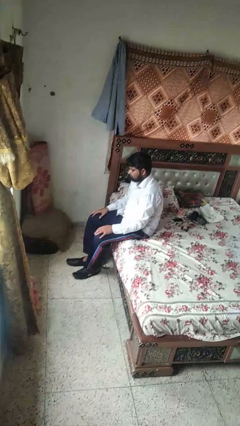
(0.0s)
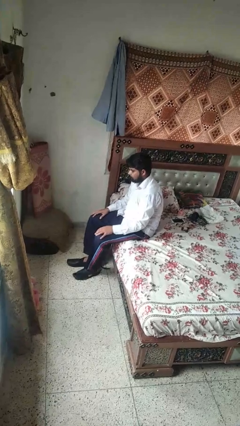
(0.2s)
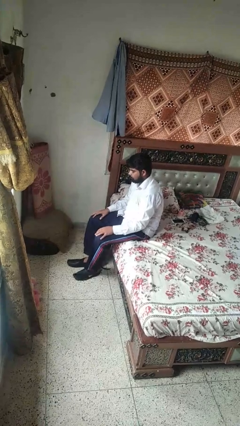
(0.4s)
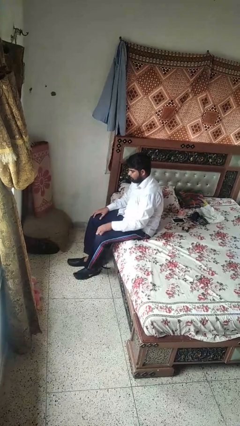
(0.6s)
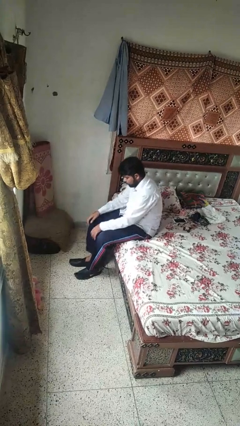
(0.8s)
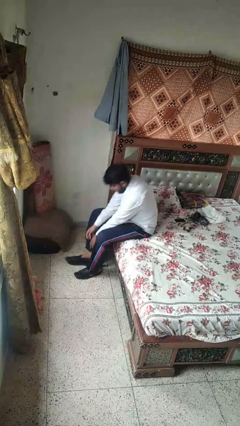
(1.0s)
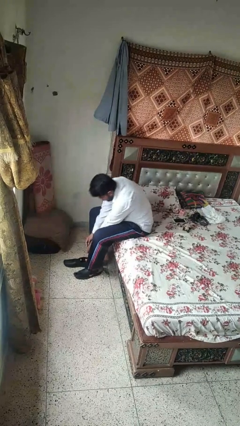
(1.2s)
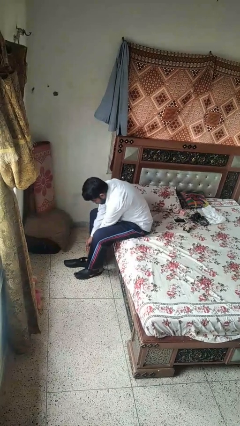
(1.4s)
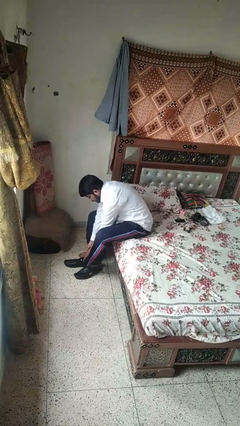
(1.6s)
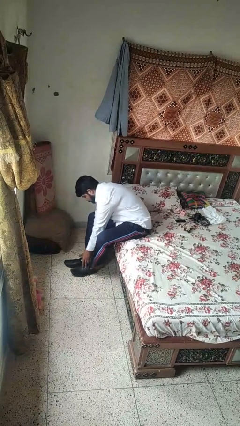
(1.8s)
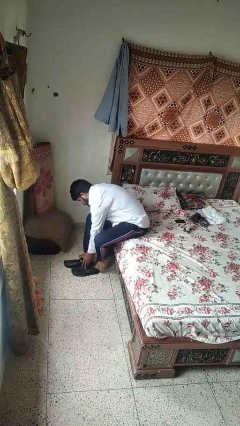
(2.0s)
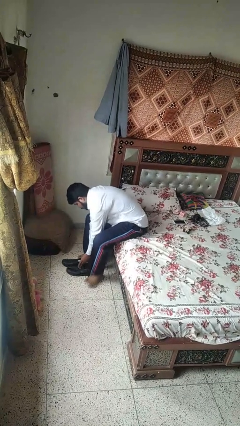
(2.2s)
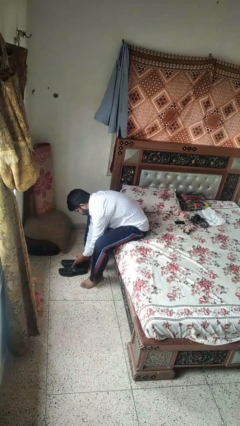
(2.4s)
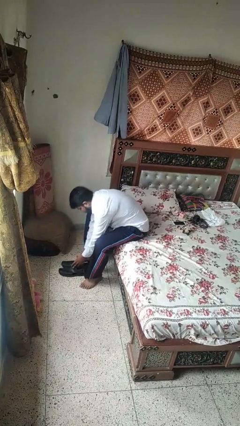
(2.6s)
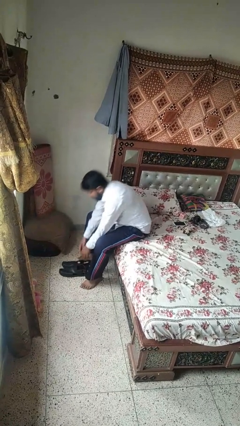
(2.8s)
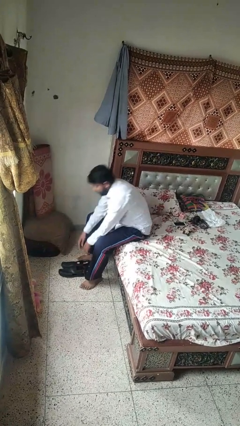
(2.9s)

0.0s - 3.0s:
person takes off shoes

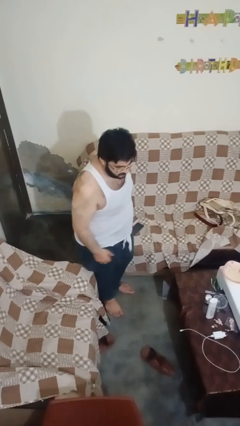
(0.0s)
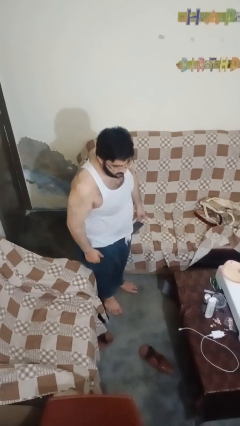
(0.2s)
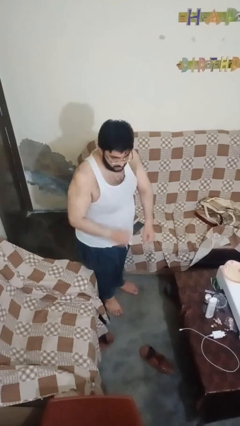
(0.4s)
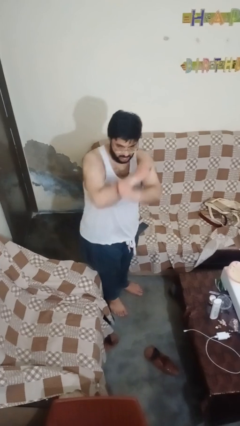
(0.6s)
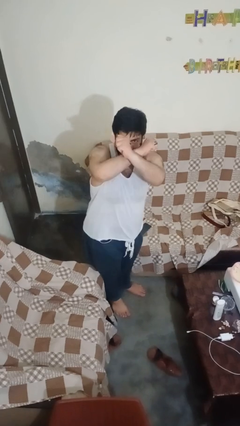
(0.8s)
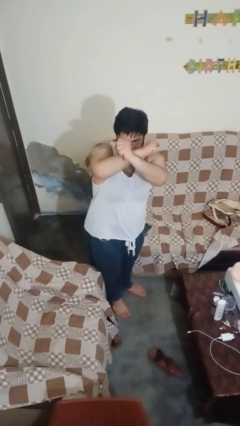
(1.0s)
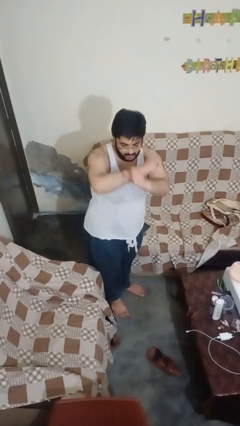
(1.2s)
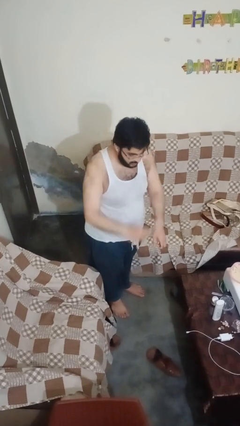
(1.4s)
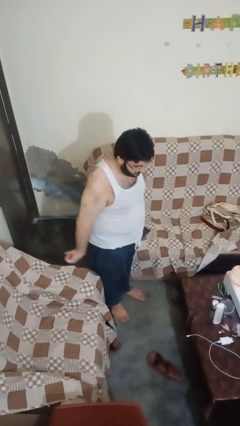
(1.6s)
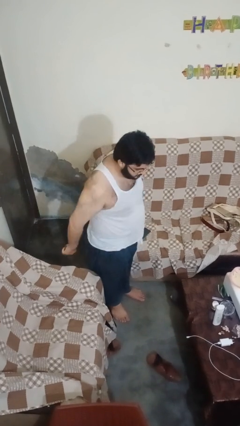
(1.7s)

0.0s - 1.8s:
person karate chop

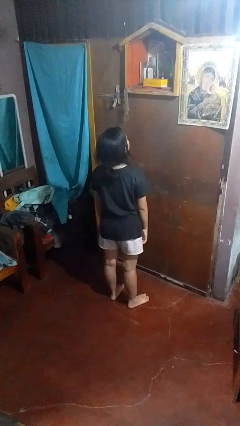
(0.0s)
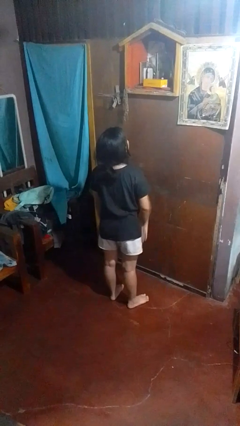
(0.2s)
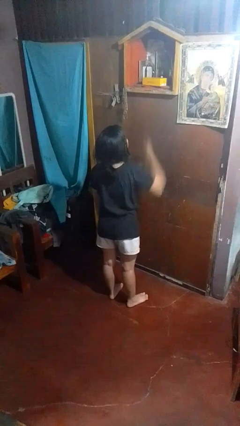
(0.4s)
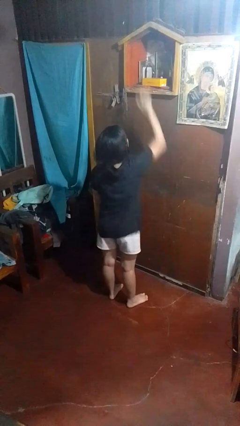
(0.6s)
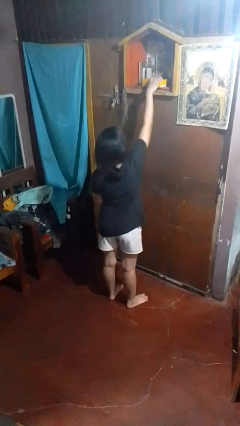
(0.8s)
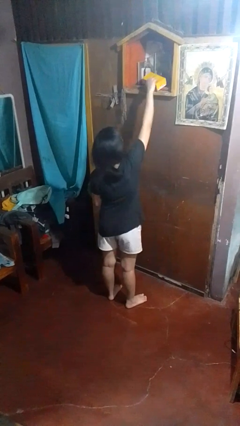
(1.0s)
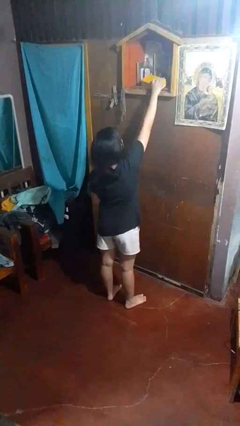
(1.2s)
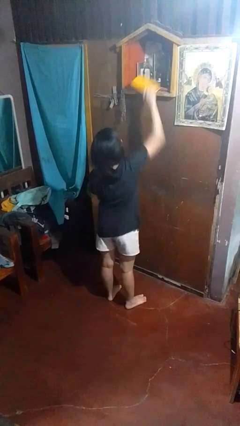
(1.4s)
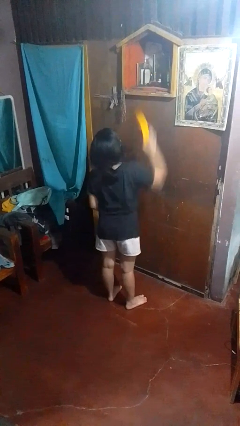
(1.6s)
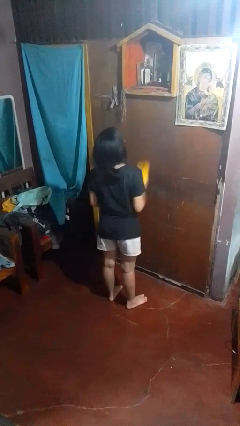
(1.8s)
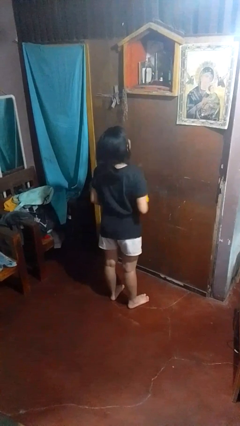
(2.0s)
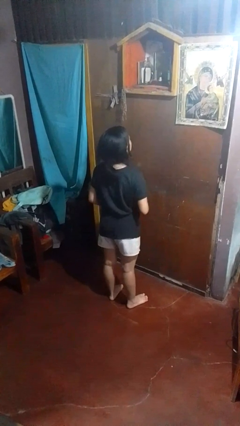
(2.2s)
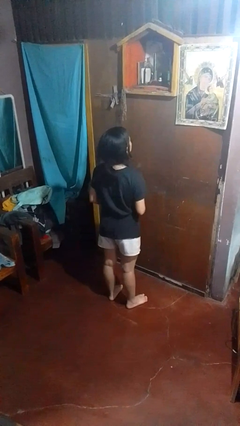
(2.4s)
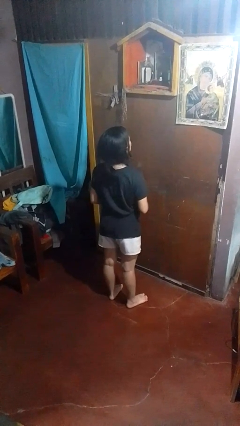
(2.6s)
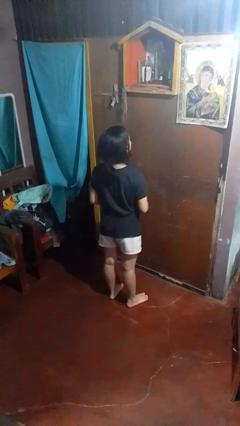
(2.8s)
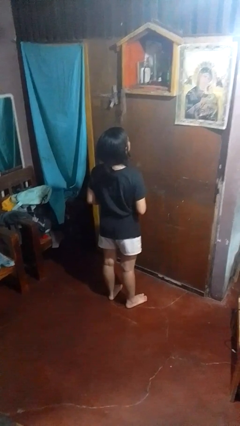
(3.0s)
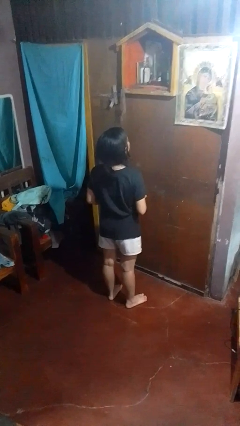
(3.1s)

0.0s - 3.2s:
person picks up object from shelf

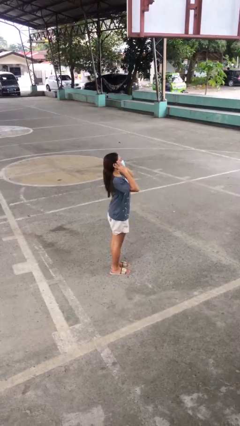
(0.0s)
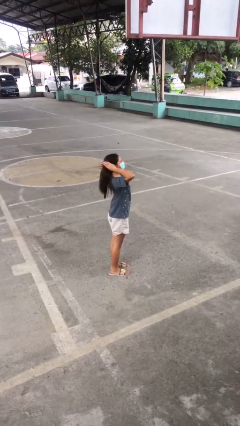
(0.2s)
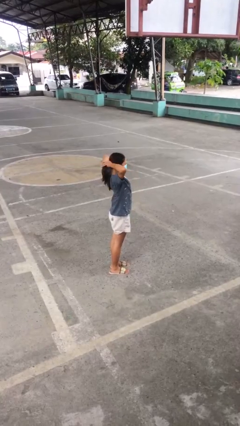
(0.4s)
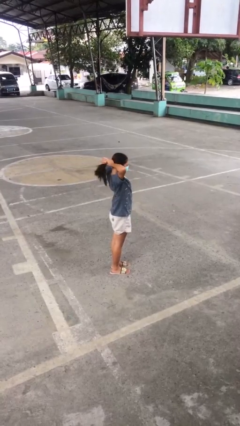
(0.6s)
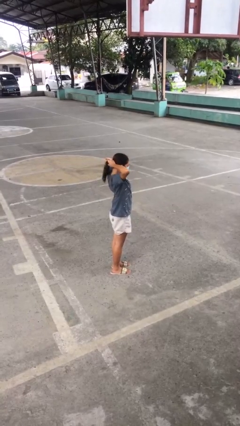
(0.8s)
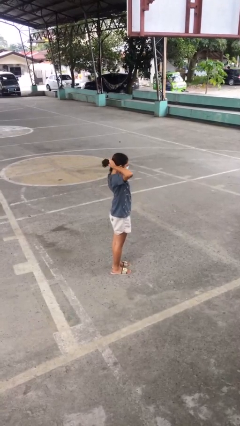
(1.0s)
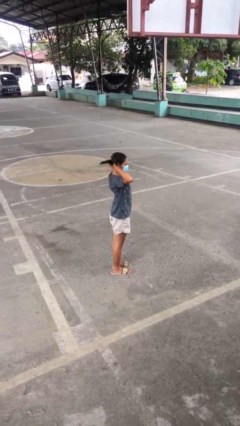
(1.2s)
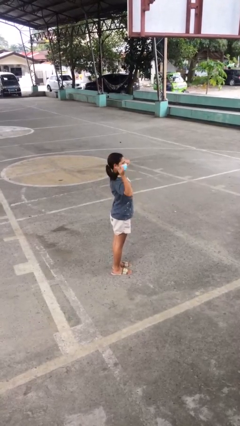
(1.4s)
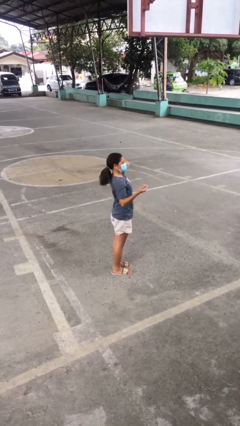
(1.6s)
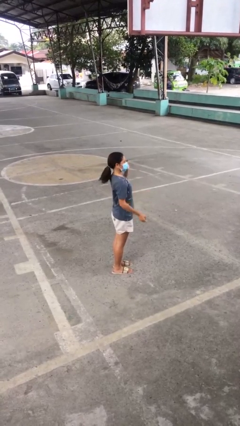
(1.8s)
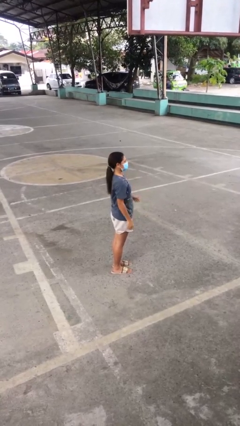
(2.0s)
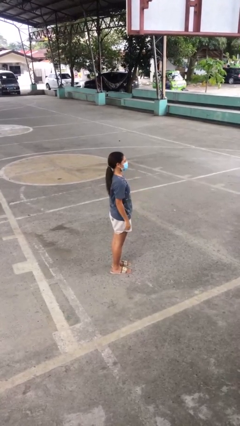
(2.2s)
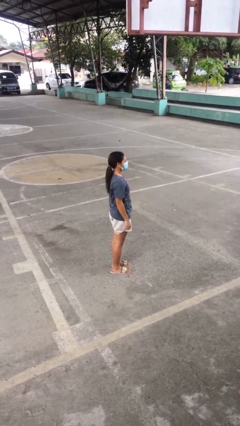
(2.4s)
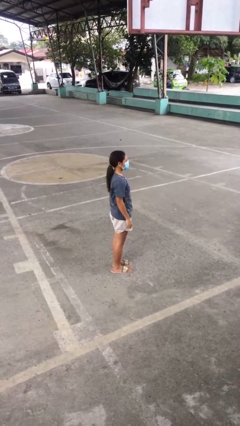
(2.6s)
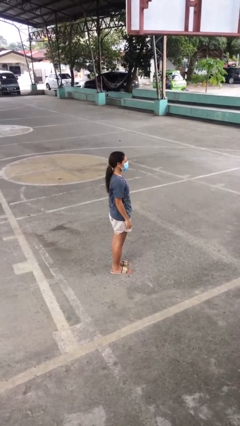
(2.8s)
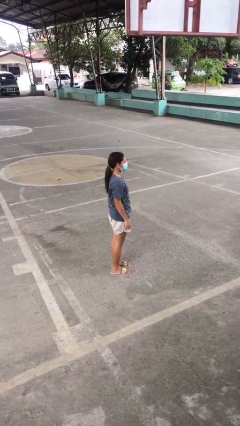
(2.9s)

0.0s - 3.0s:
person puts hair in ponytail

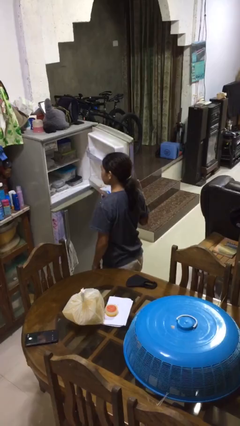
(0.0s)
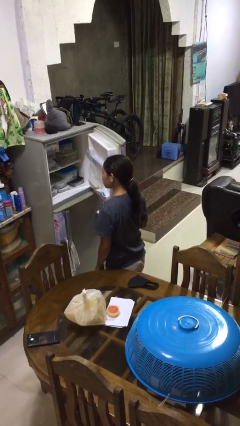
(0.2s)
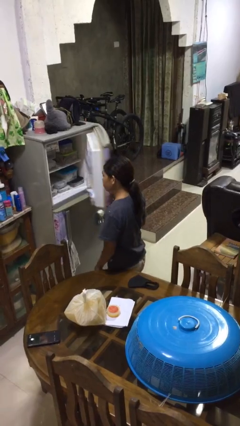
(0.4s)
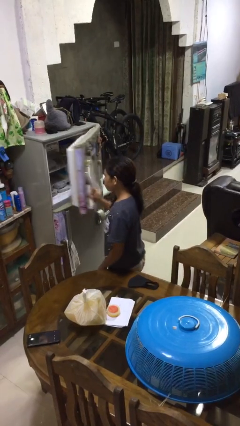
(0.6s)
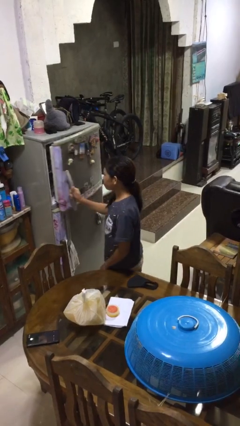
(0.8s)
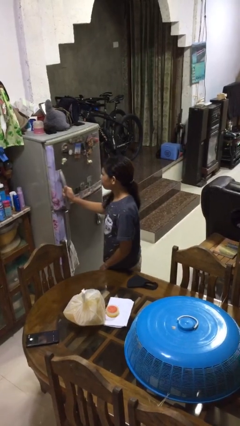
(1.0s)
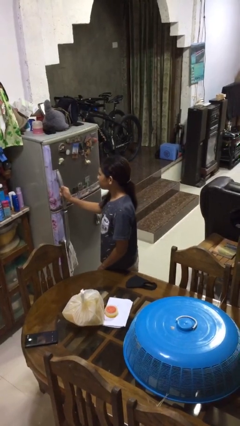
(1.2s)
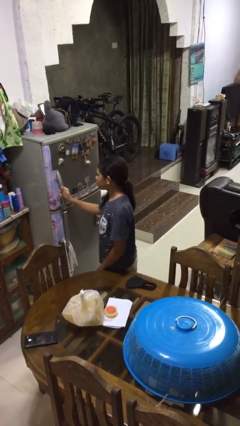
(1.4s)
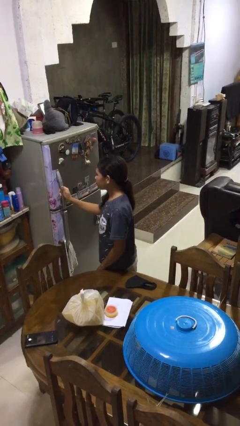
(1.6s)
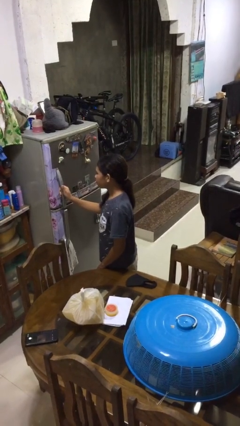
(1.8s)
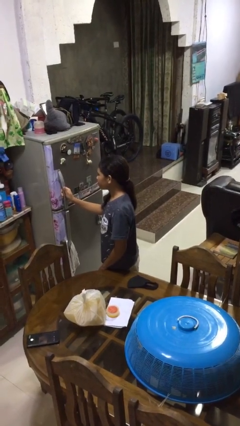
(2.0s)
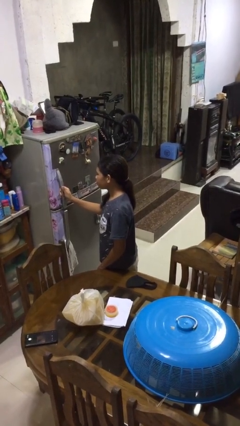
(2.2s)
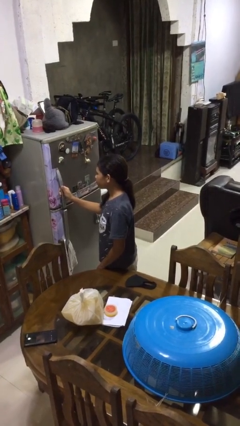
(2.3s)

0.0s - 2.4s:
person closes refrigerator

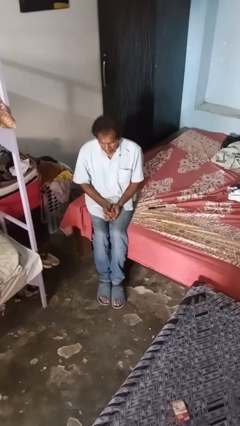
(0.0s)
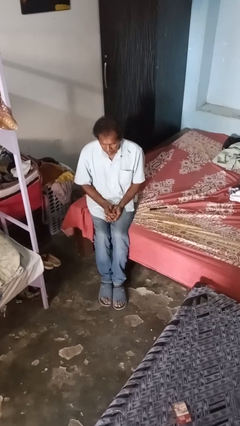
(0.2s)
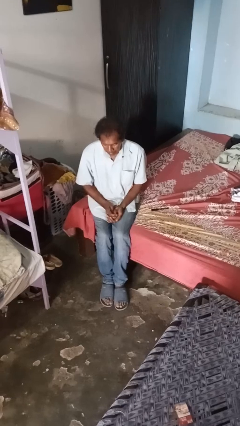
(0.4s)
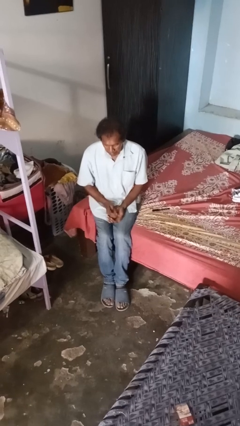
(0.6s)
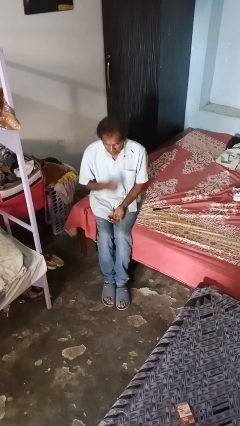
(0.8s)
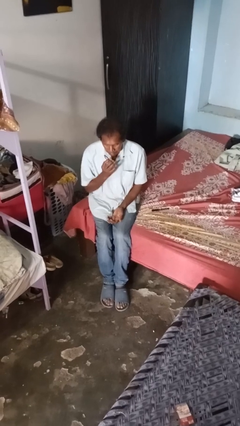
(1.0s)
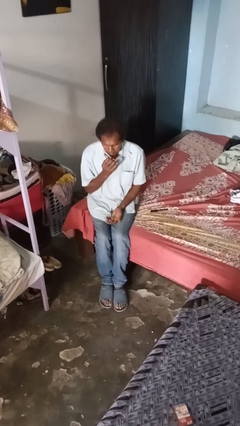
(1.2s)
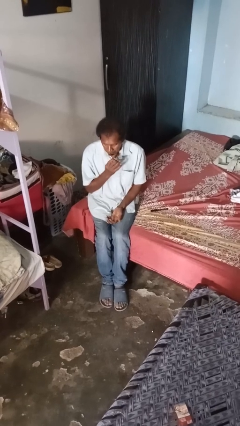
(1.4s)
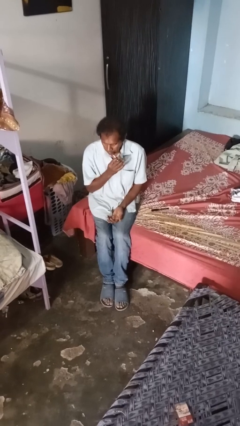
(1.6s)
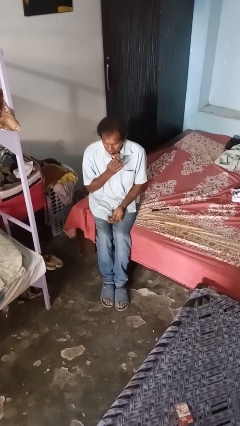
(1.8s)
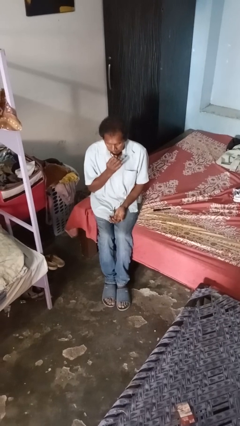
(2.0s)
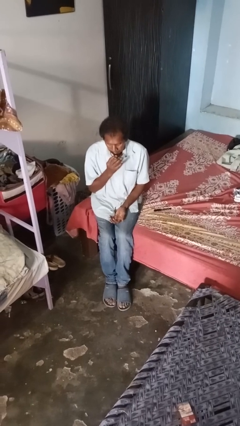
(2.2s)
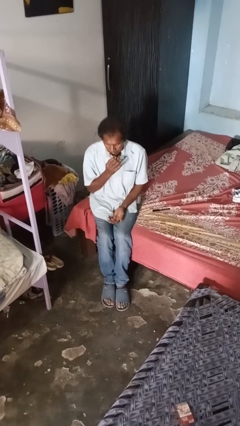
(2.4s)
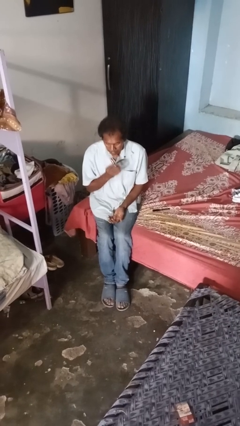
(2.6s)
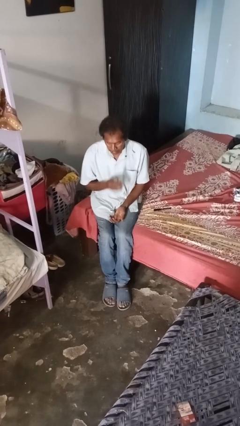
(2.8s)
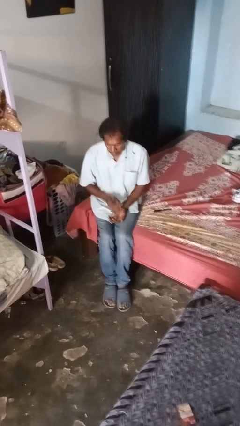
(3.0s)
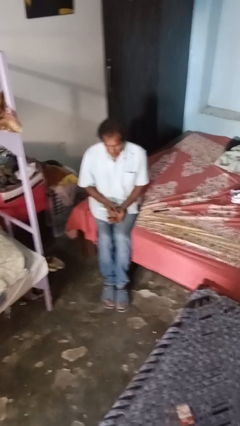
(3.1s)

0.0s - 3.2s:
person applies lip makeup

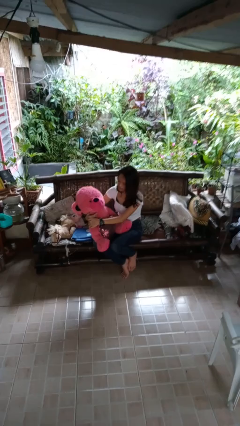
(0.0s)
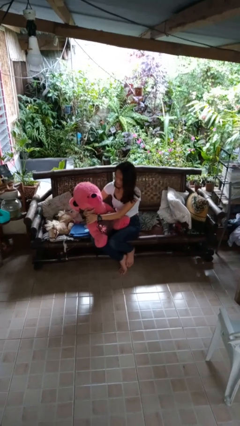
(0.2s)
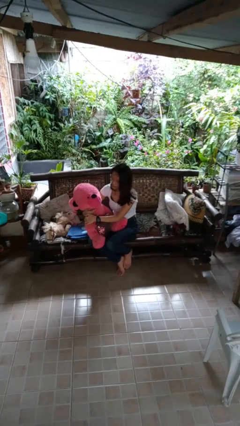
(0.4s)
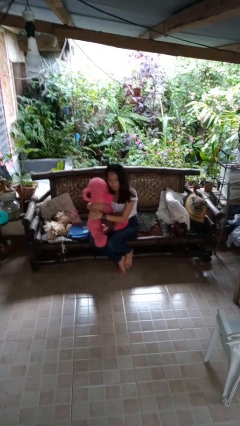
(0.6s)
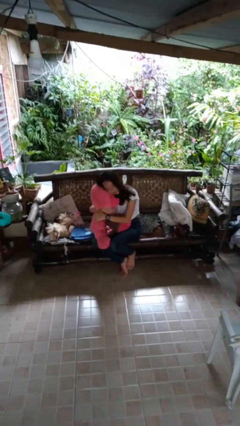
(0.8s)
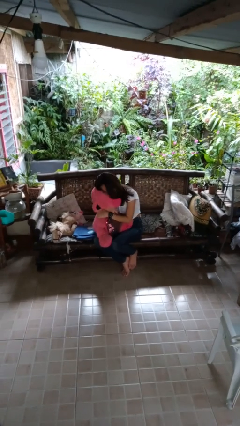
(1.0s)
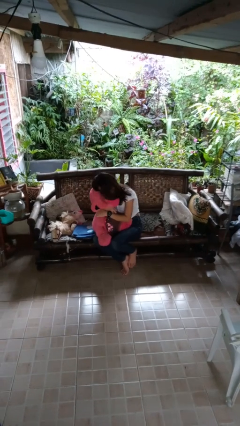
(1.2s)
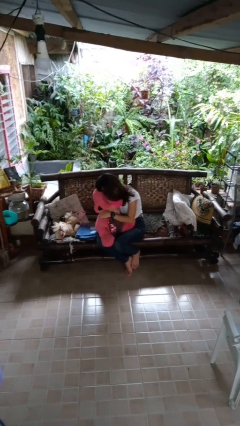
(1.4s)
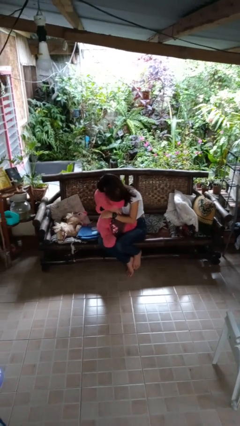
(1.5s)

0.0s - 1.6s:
person hugs stuffed animal
